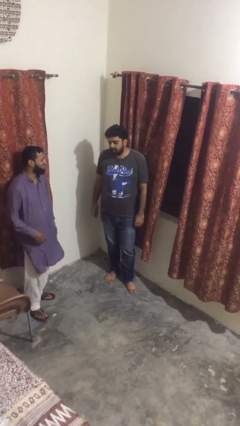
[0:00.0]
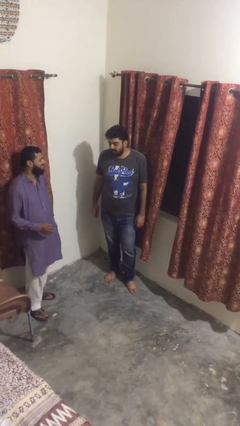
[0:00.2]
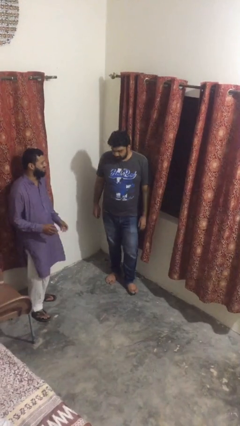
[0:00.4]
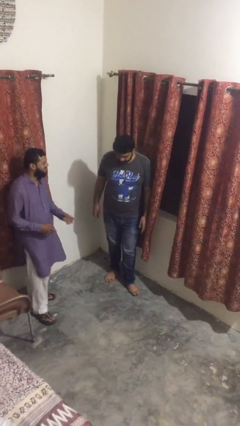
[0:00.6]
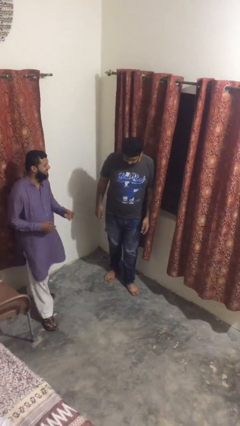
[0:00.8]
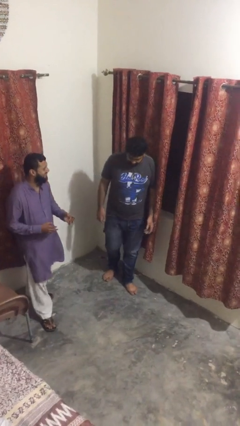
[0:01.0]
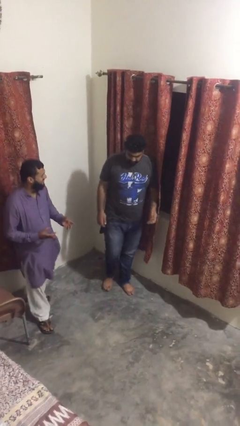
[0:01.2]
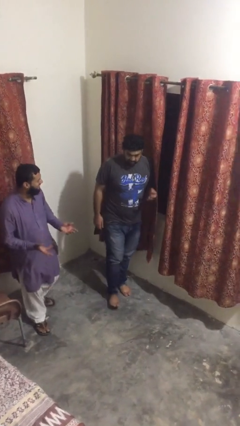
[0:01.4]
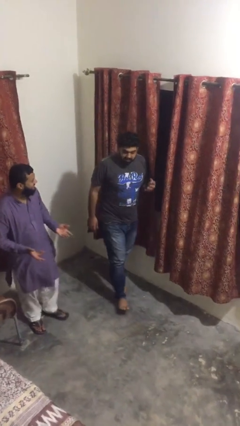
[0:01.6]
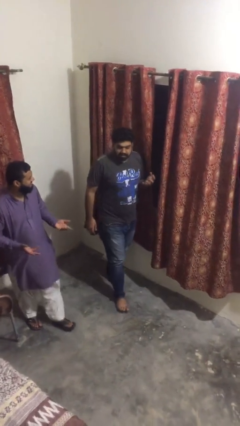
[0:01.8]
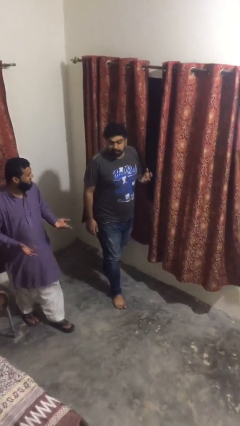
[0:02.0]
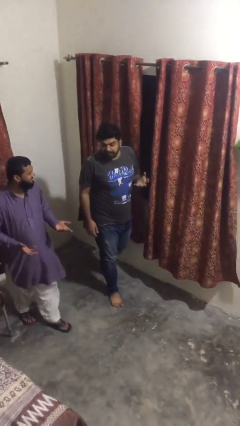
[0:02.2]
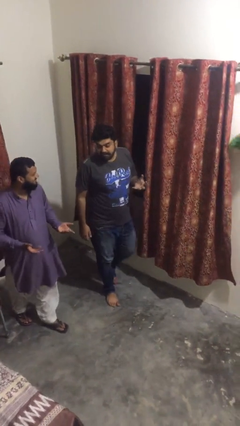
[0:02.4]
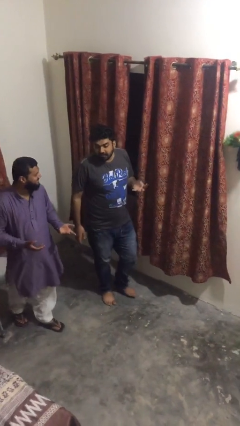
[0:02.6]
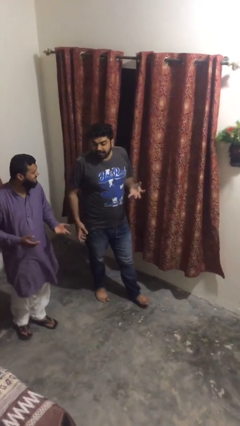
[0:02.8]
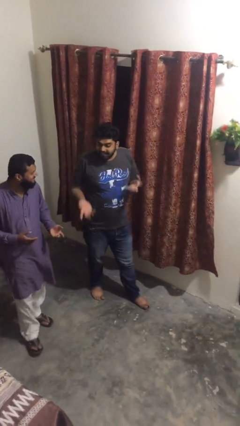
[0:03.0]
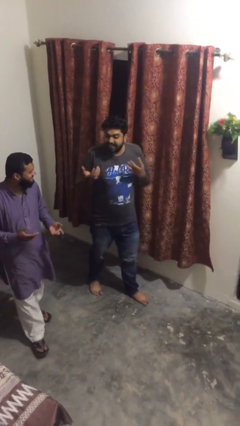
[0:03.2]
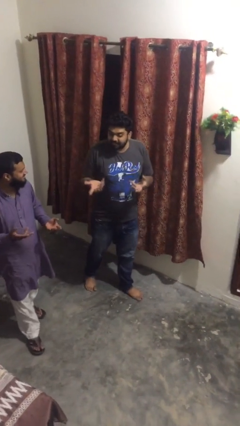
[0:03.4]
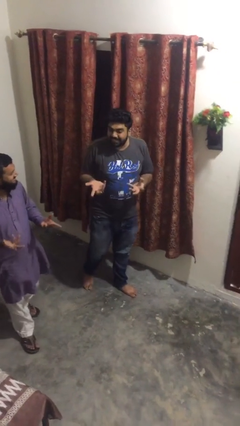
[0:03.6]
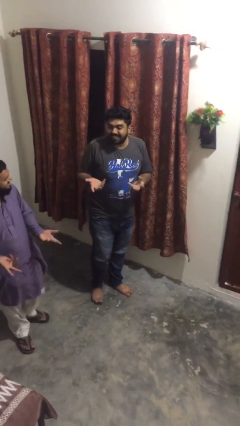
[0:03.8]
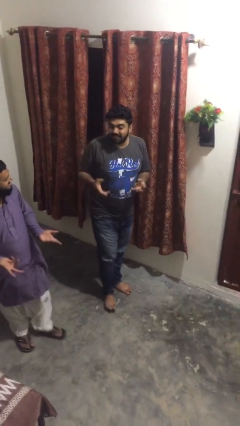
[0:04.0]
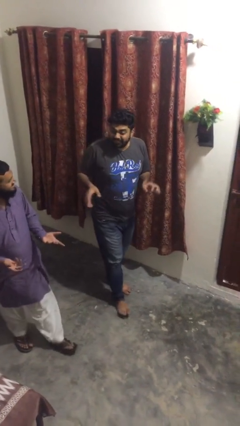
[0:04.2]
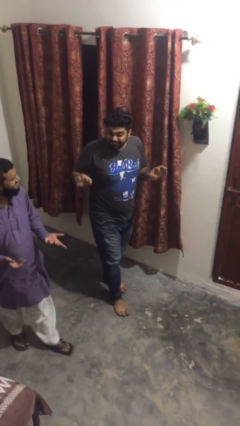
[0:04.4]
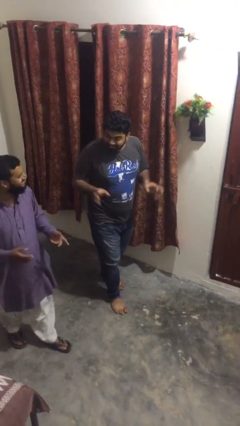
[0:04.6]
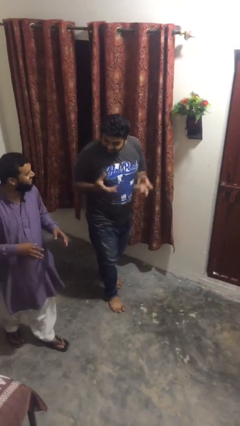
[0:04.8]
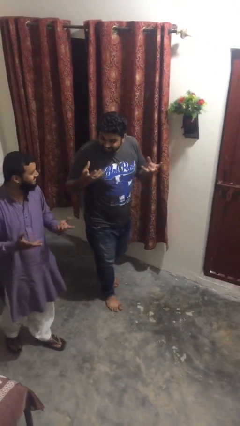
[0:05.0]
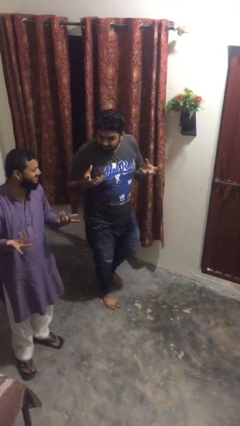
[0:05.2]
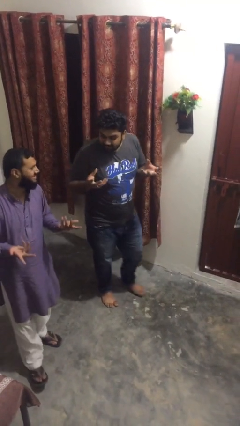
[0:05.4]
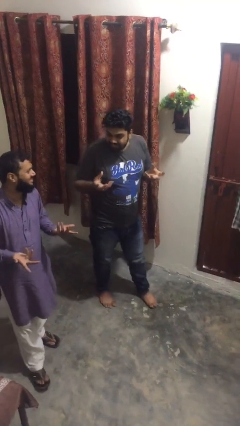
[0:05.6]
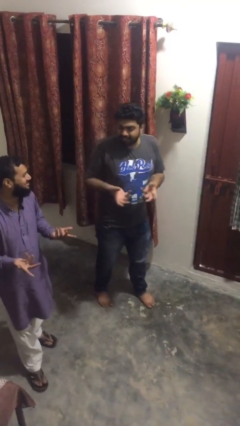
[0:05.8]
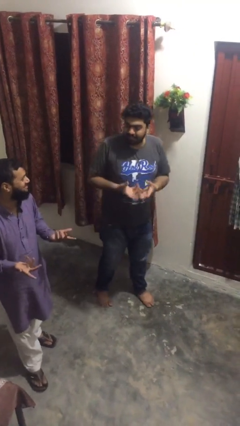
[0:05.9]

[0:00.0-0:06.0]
person talks to person

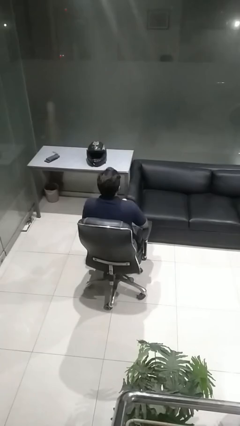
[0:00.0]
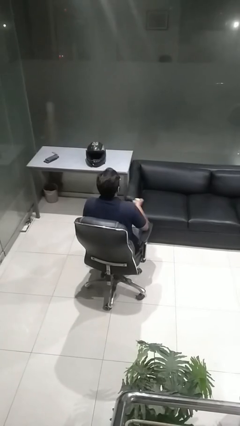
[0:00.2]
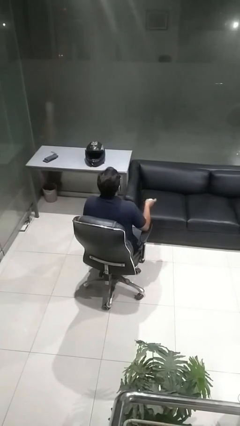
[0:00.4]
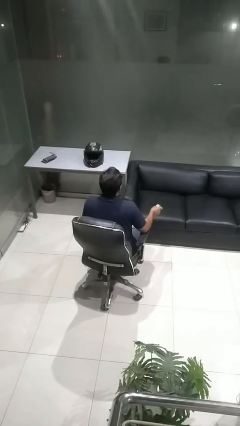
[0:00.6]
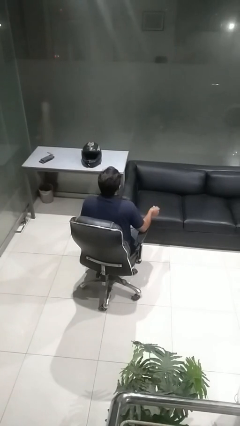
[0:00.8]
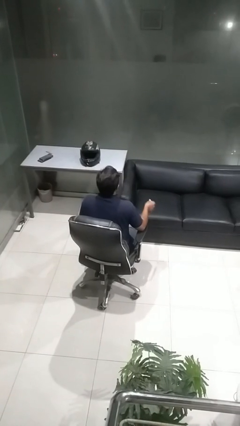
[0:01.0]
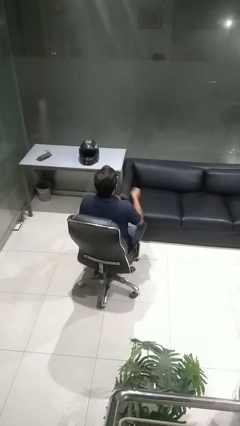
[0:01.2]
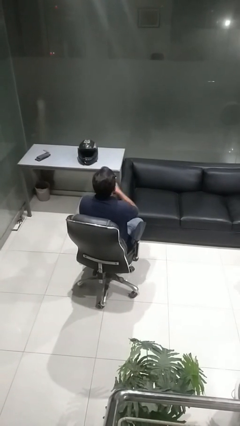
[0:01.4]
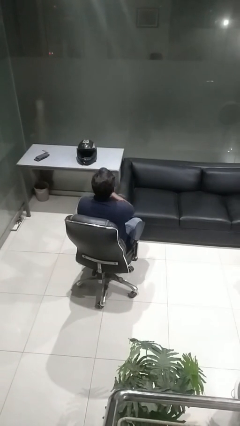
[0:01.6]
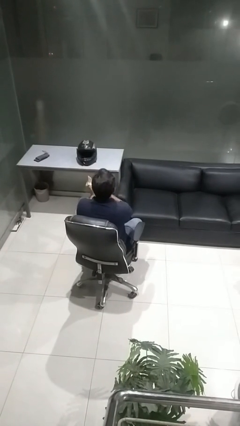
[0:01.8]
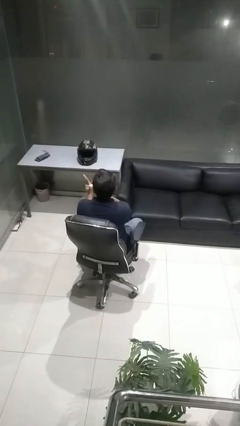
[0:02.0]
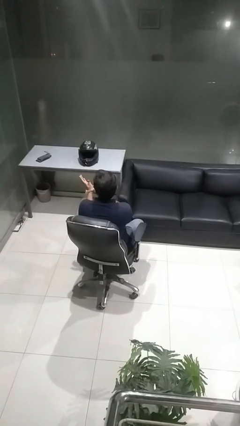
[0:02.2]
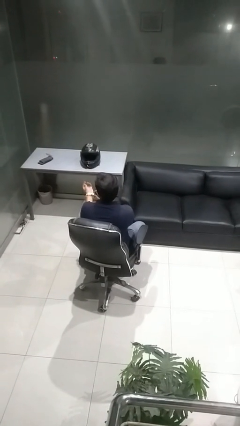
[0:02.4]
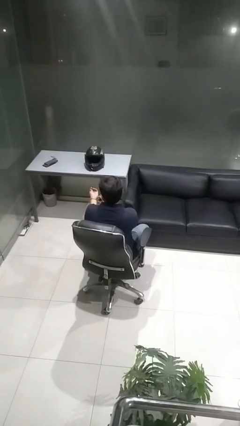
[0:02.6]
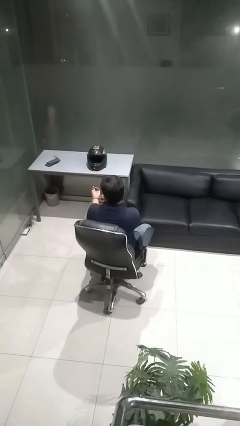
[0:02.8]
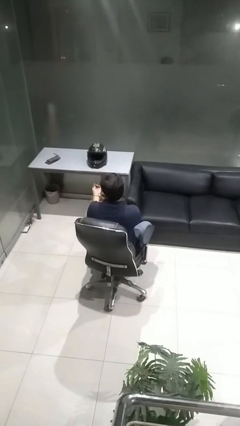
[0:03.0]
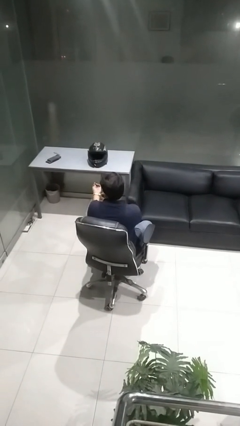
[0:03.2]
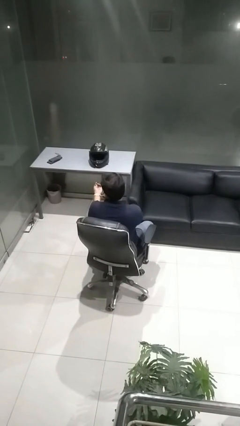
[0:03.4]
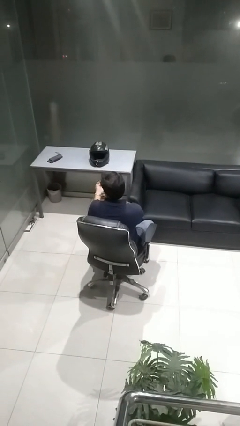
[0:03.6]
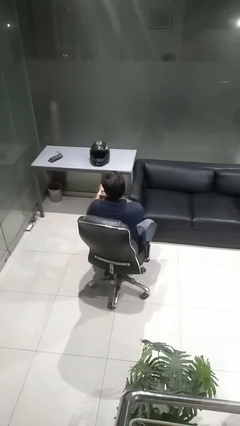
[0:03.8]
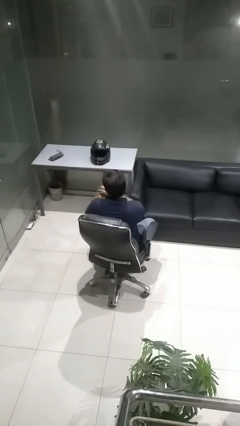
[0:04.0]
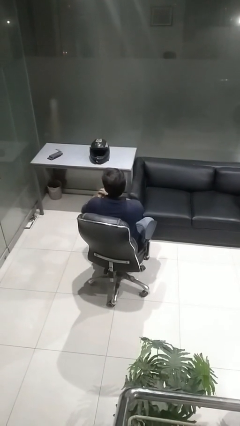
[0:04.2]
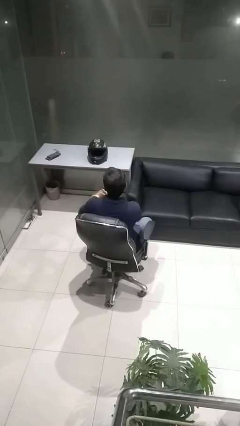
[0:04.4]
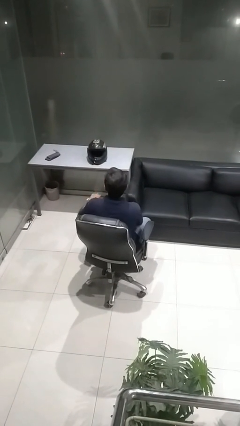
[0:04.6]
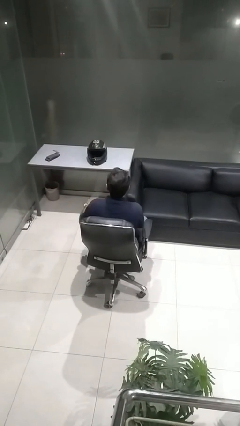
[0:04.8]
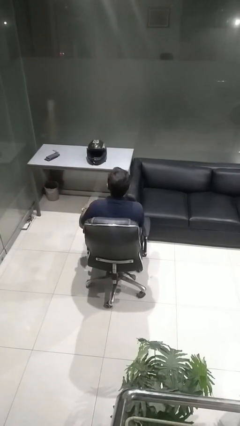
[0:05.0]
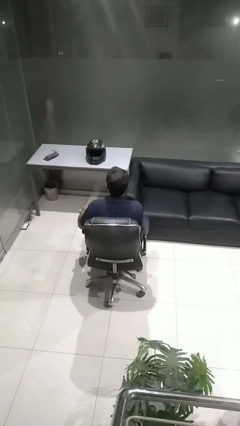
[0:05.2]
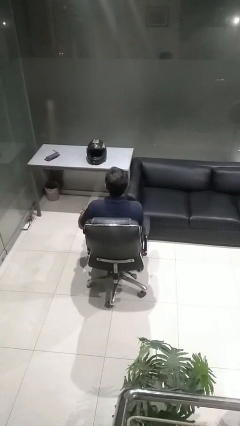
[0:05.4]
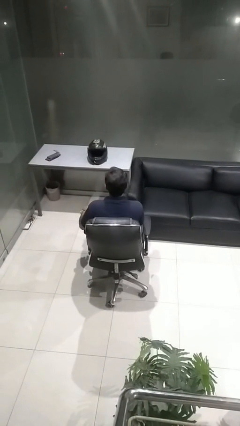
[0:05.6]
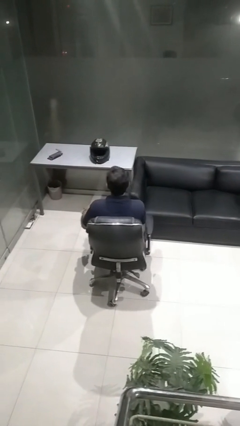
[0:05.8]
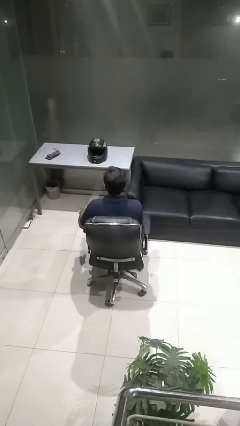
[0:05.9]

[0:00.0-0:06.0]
person puts on wristwatch

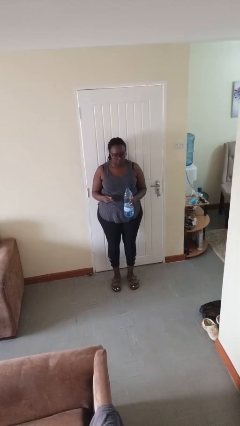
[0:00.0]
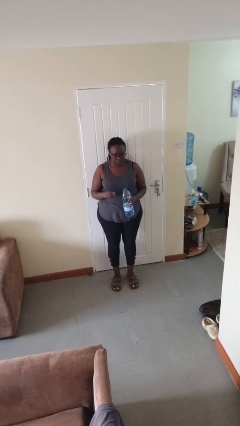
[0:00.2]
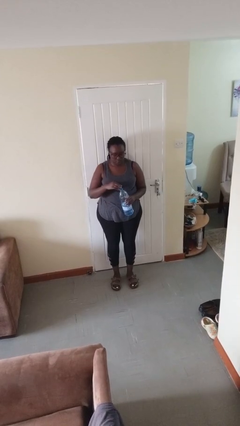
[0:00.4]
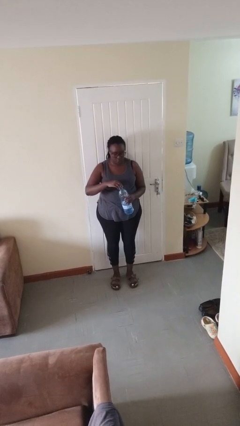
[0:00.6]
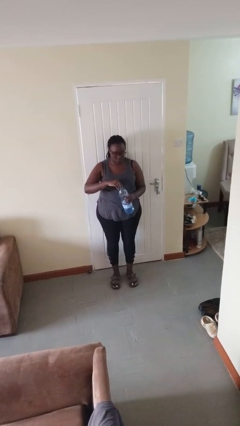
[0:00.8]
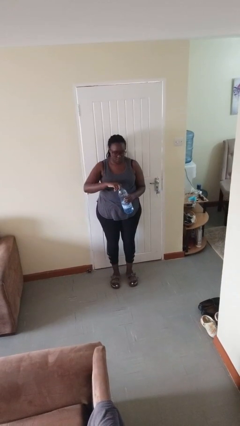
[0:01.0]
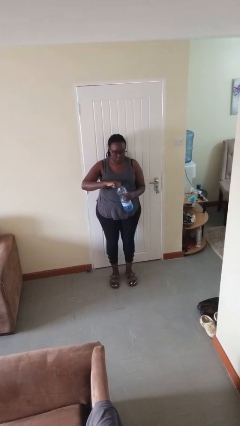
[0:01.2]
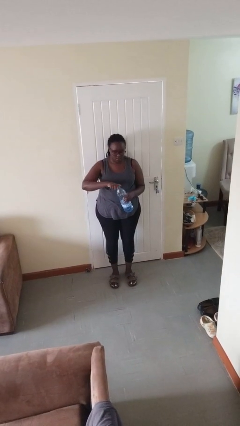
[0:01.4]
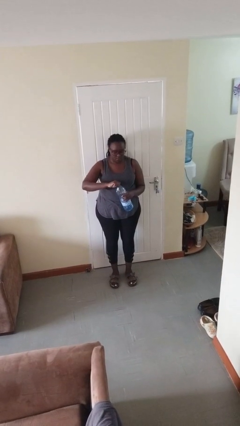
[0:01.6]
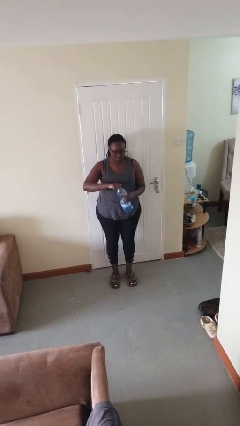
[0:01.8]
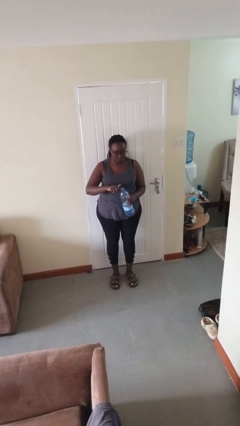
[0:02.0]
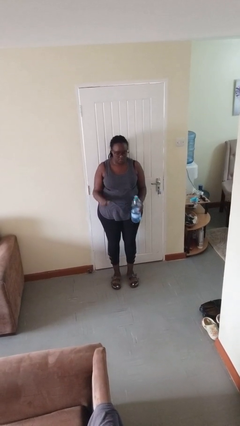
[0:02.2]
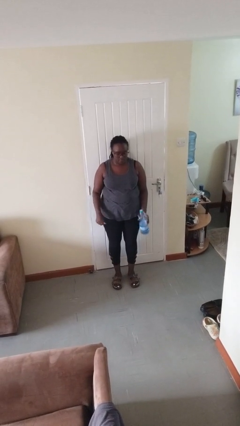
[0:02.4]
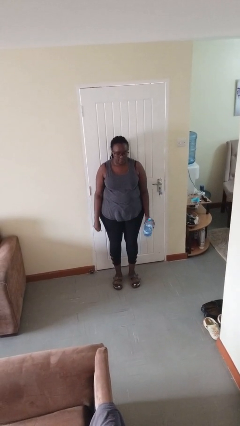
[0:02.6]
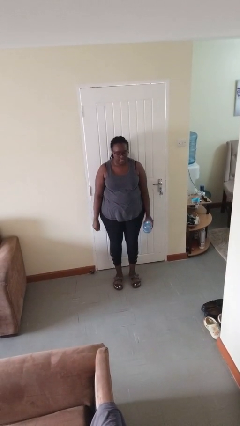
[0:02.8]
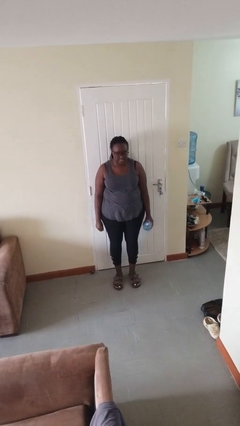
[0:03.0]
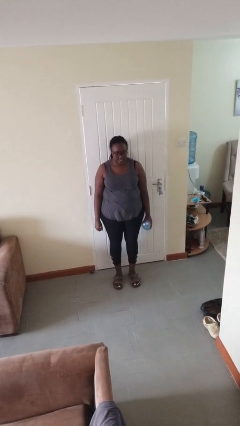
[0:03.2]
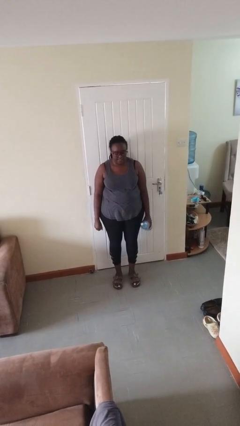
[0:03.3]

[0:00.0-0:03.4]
person screws lid to bottle

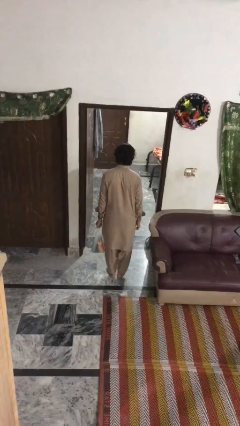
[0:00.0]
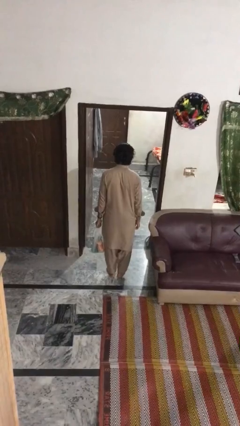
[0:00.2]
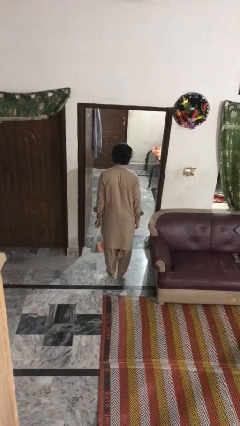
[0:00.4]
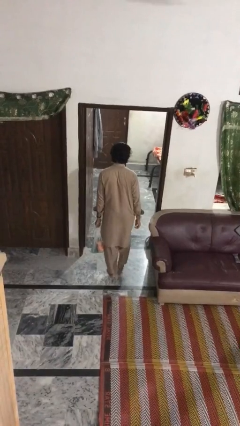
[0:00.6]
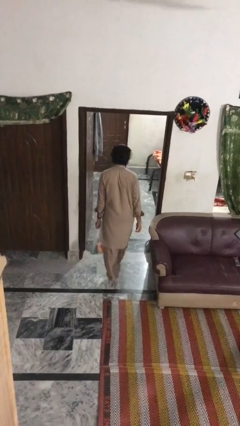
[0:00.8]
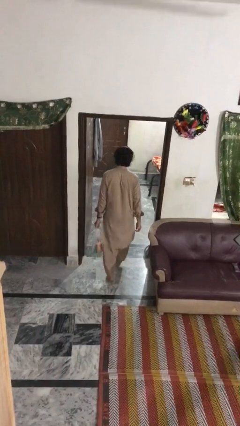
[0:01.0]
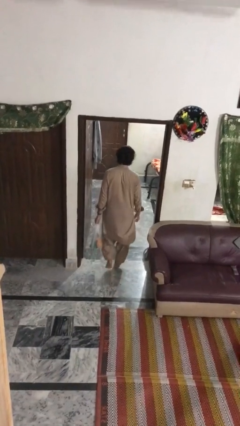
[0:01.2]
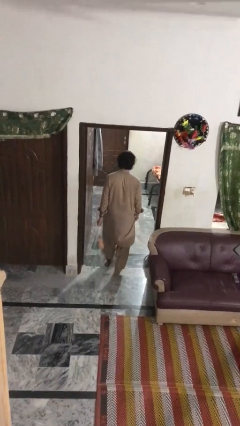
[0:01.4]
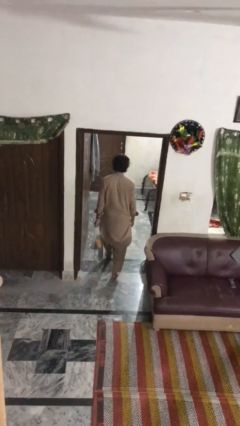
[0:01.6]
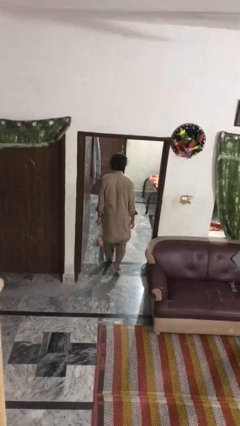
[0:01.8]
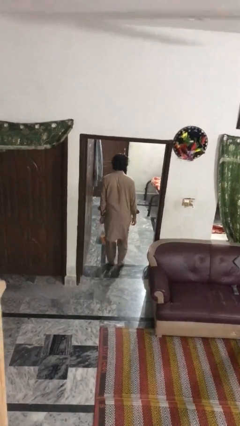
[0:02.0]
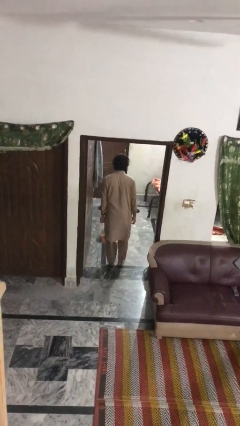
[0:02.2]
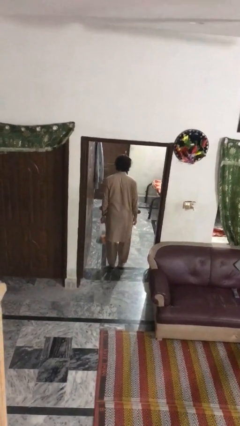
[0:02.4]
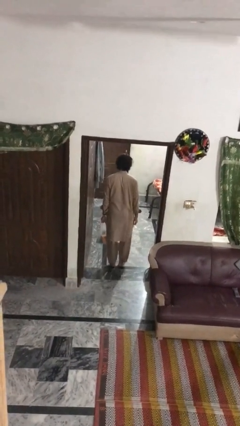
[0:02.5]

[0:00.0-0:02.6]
person carries groceries
